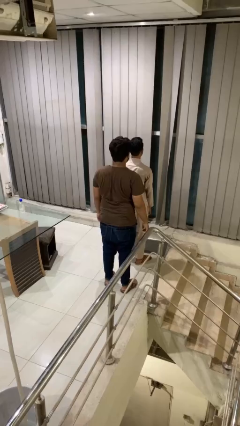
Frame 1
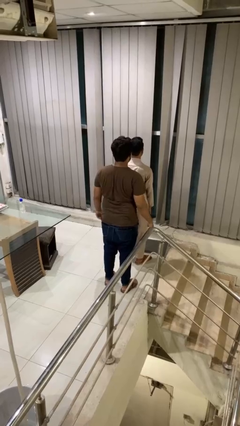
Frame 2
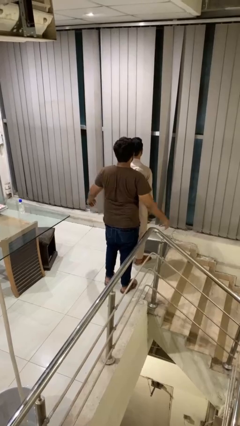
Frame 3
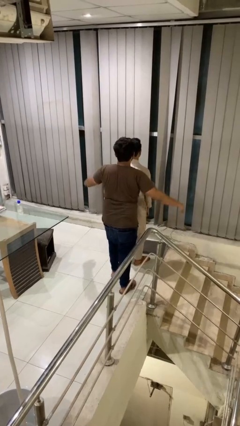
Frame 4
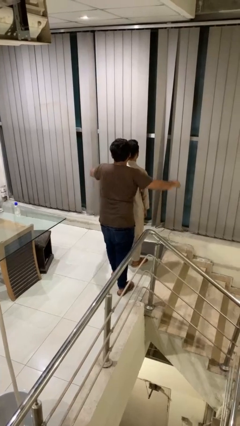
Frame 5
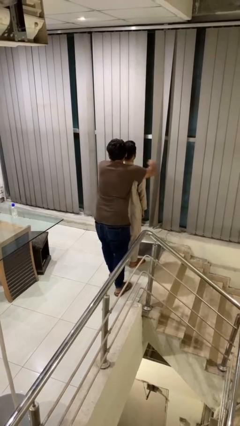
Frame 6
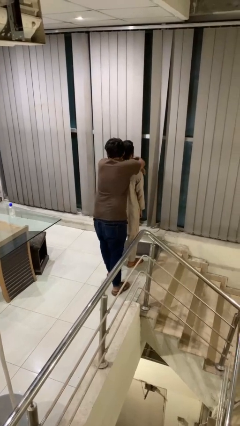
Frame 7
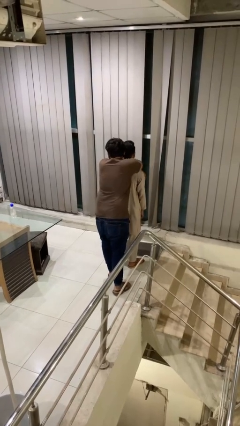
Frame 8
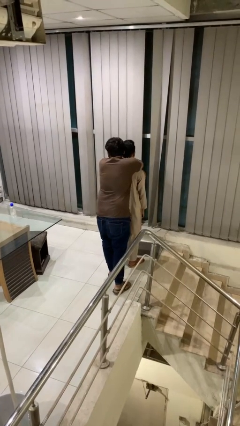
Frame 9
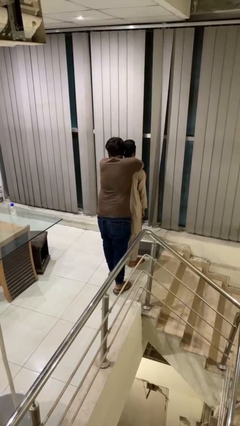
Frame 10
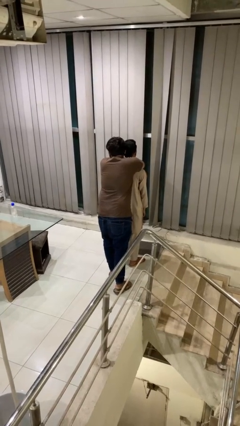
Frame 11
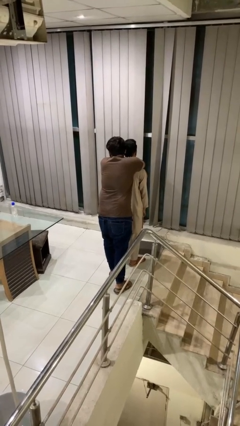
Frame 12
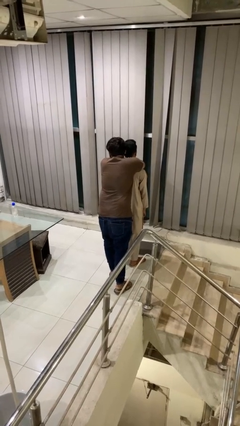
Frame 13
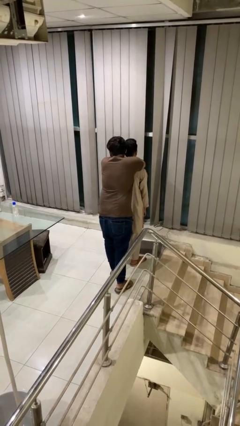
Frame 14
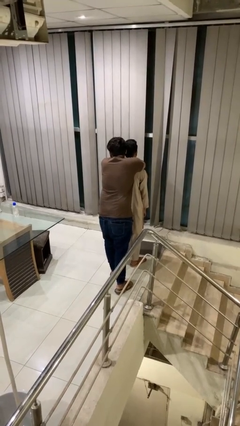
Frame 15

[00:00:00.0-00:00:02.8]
person hugs person from behind

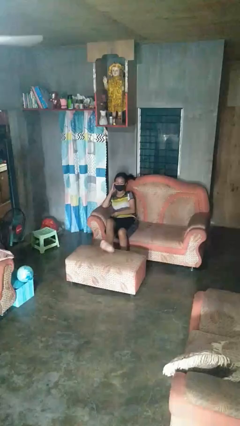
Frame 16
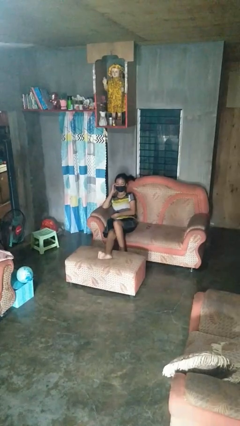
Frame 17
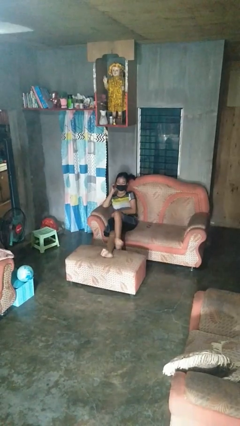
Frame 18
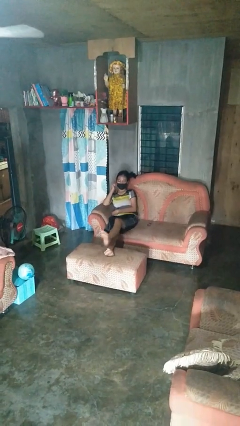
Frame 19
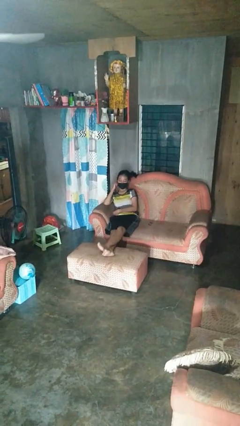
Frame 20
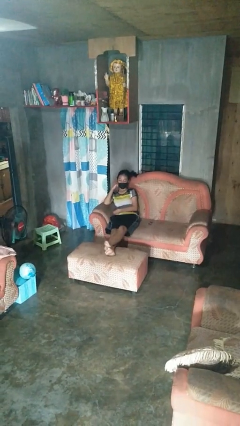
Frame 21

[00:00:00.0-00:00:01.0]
person puts feet up

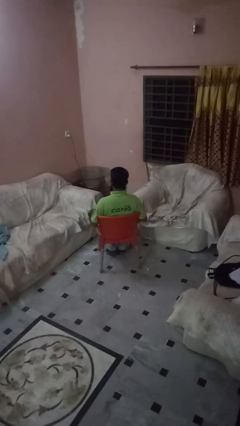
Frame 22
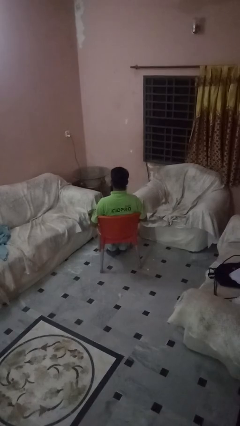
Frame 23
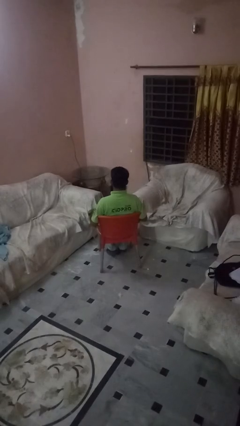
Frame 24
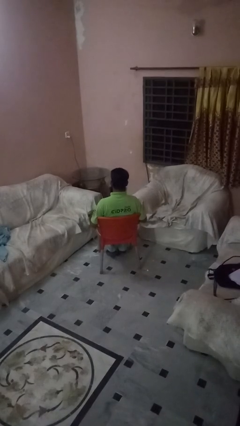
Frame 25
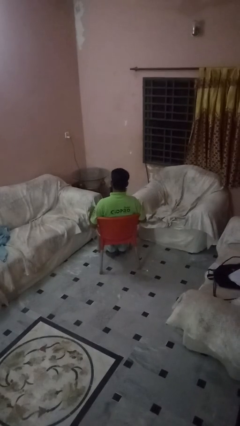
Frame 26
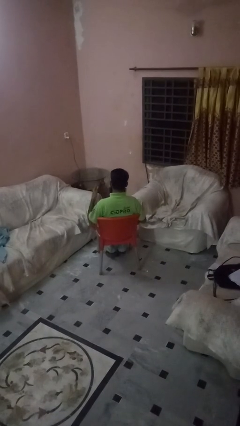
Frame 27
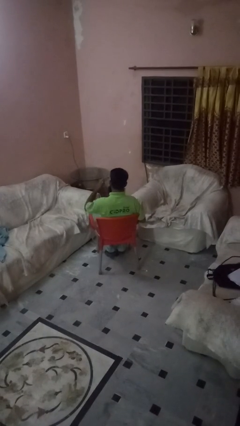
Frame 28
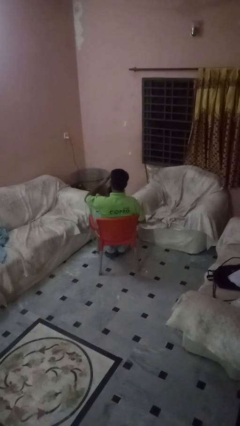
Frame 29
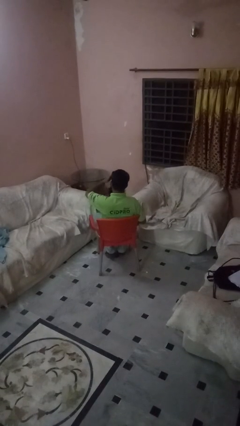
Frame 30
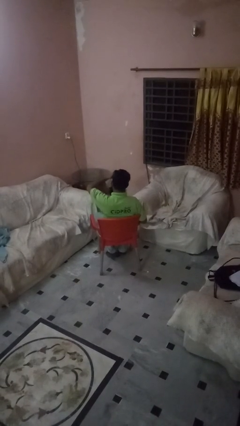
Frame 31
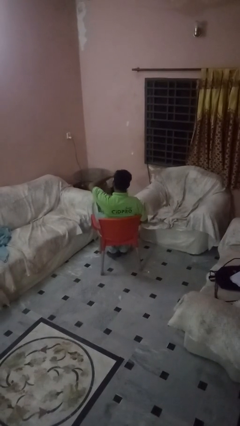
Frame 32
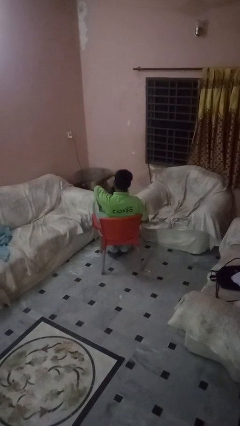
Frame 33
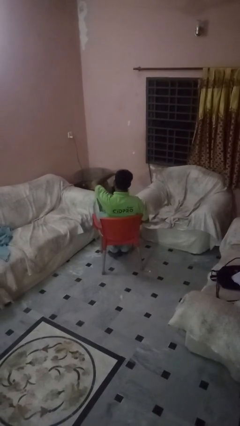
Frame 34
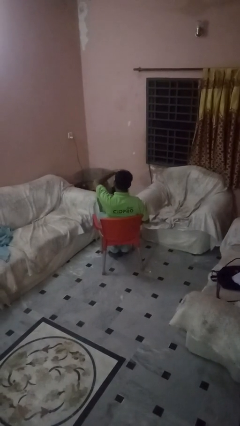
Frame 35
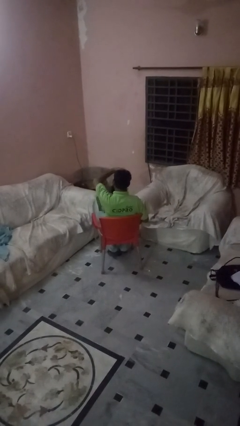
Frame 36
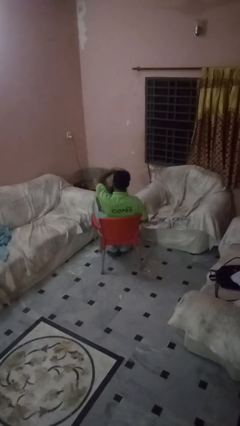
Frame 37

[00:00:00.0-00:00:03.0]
person strokes hair

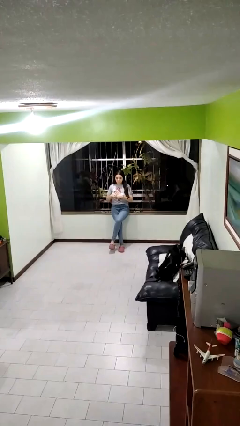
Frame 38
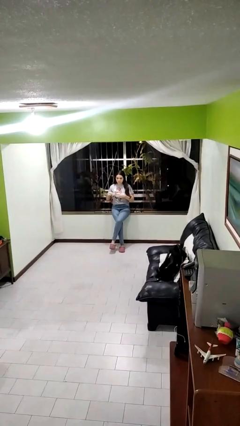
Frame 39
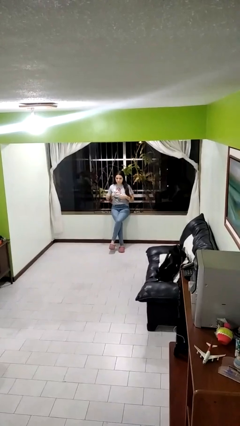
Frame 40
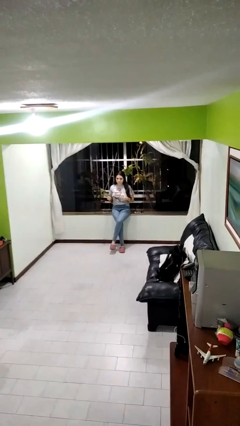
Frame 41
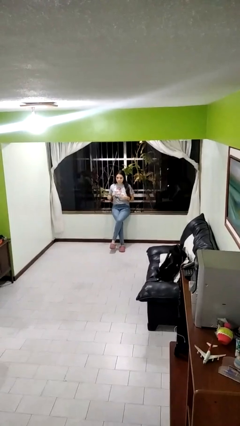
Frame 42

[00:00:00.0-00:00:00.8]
person takes off ring

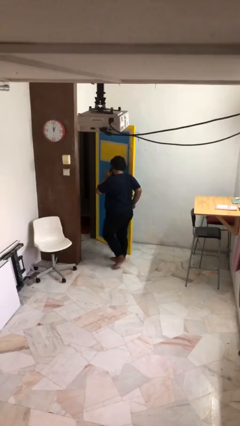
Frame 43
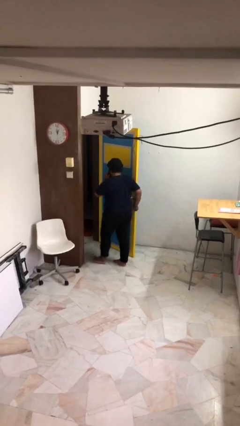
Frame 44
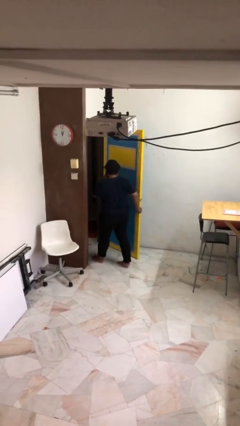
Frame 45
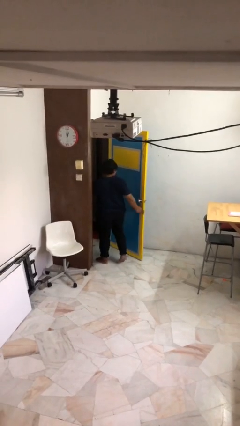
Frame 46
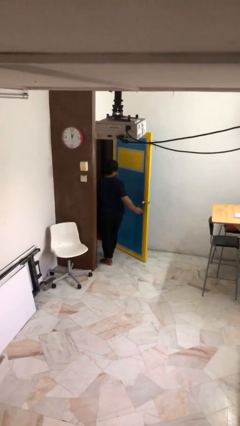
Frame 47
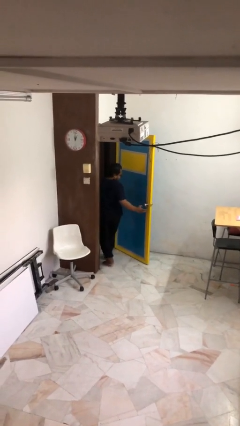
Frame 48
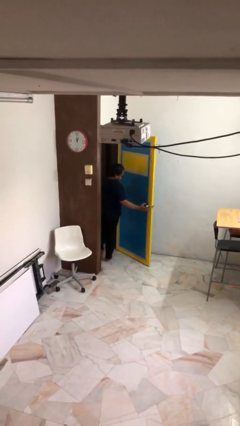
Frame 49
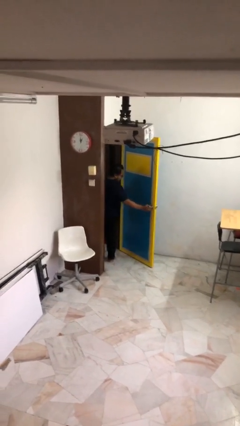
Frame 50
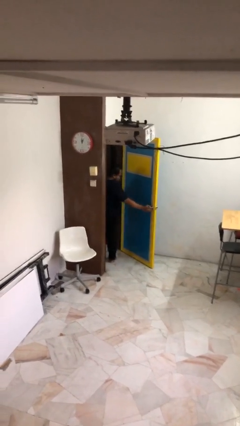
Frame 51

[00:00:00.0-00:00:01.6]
person exits scene through structure

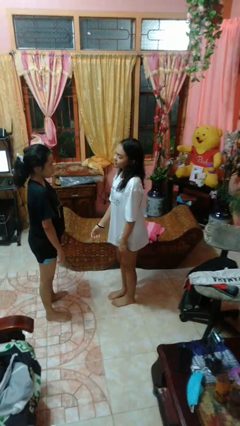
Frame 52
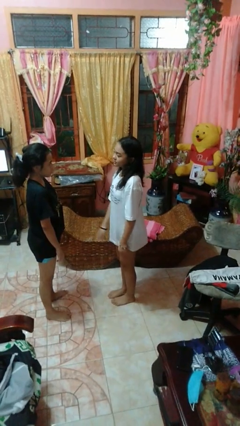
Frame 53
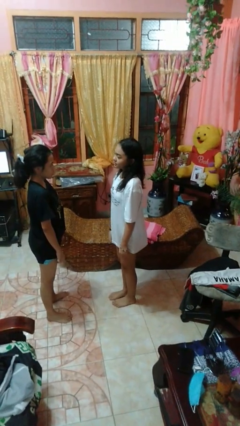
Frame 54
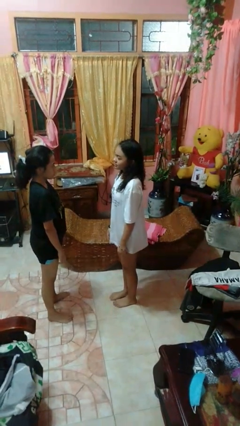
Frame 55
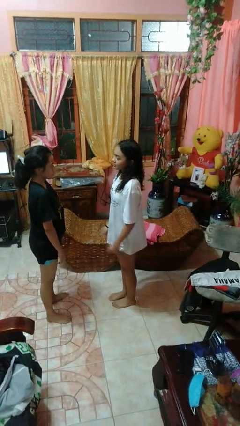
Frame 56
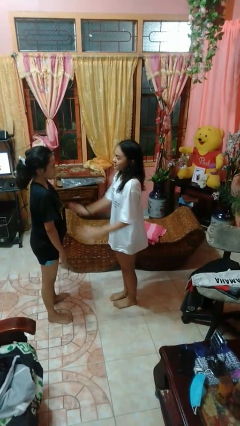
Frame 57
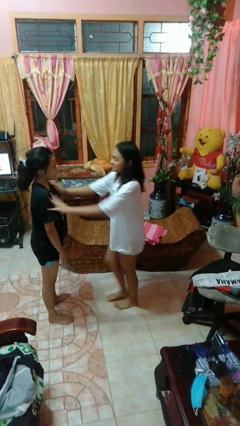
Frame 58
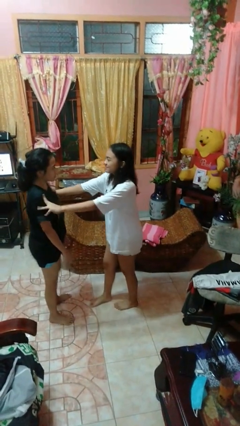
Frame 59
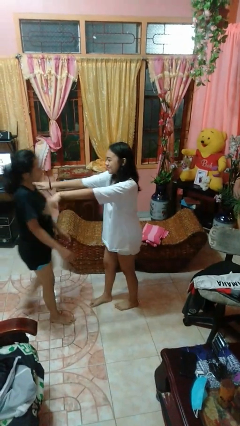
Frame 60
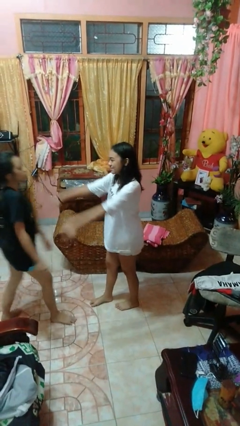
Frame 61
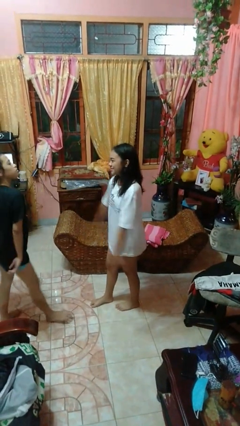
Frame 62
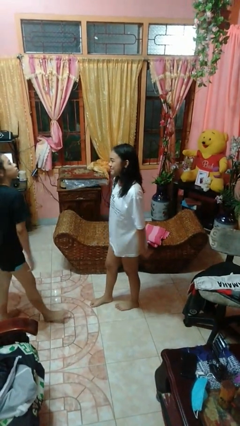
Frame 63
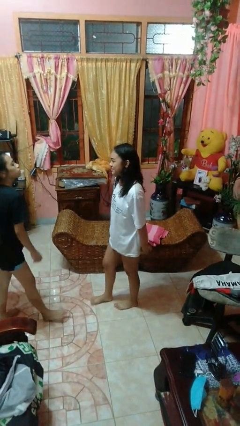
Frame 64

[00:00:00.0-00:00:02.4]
person shoves person

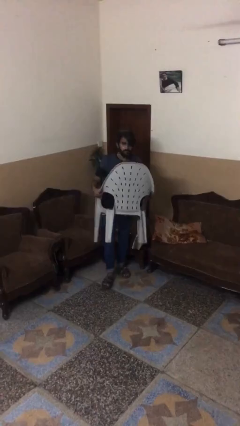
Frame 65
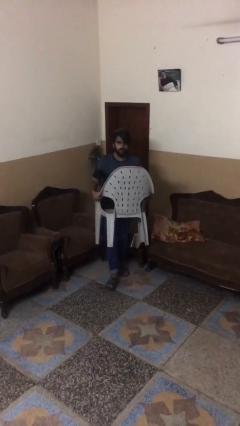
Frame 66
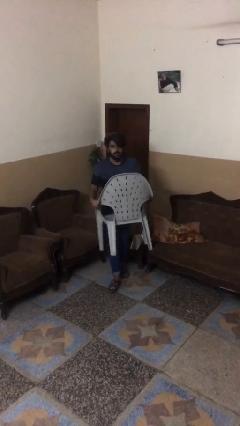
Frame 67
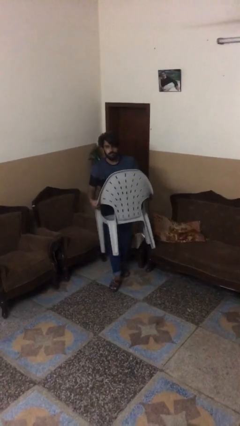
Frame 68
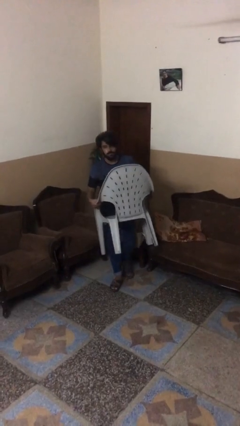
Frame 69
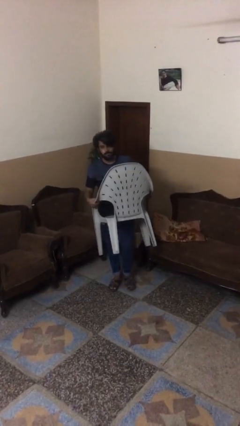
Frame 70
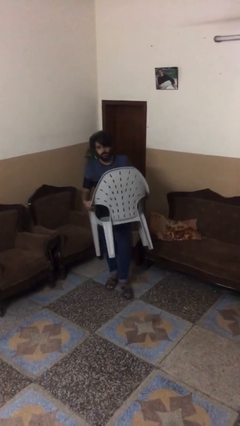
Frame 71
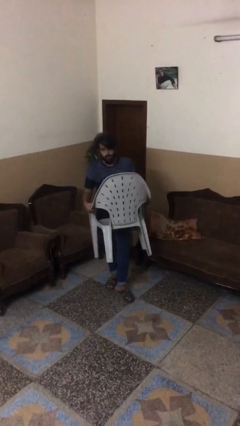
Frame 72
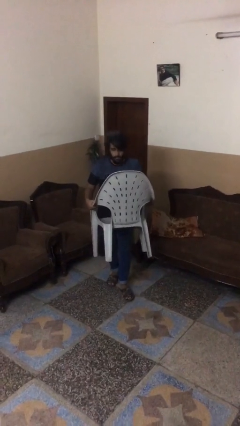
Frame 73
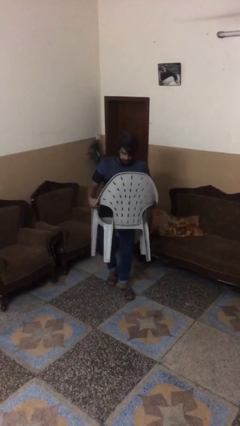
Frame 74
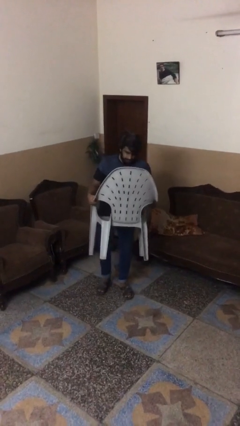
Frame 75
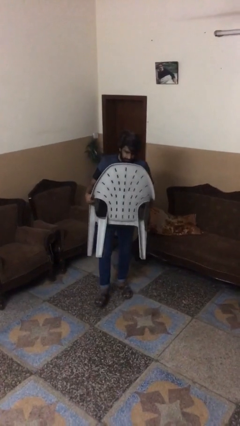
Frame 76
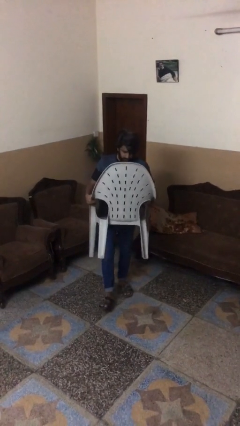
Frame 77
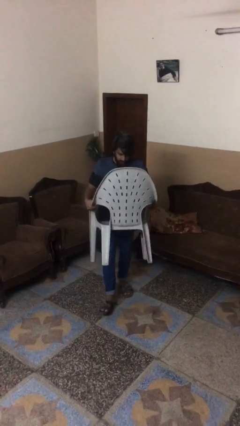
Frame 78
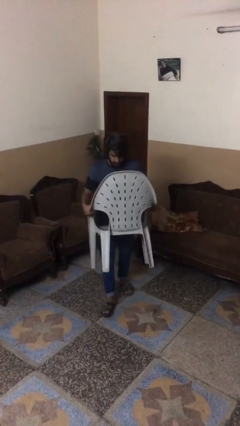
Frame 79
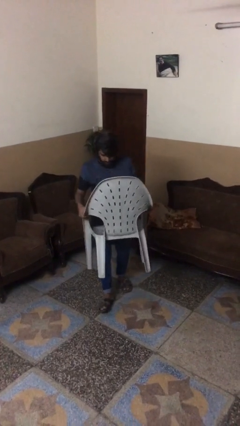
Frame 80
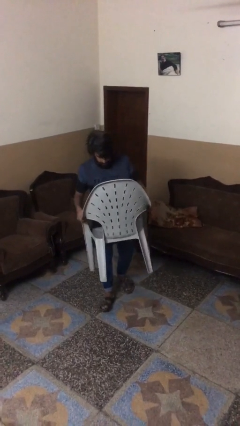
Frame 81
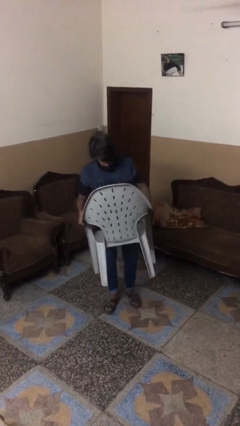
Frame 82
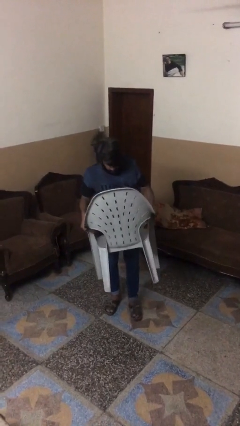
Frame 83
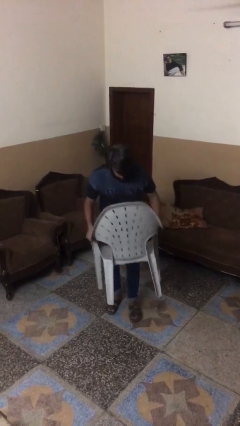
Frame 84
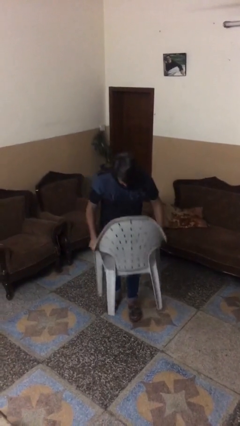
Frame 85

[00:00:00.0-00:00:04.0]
person carries heavy object

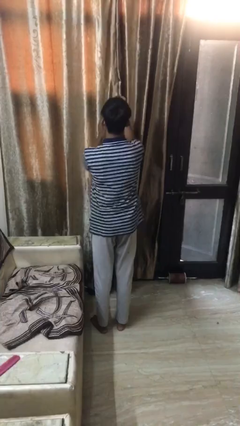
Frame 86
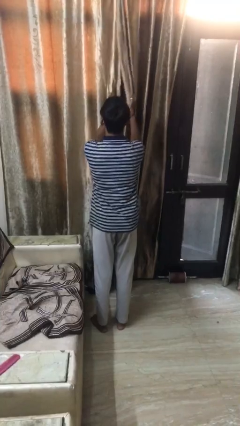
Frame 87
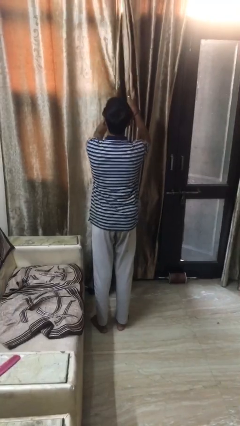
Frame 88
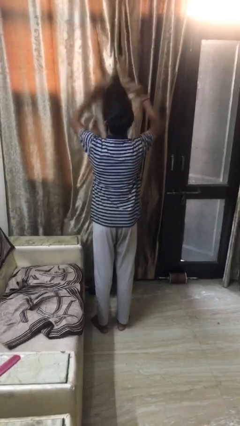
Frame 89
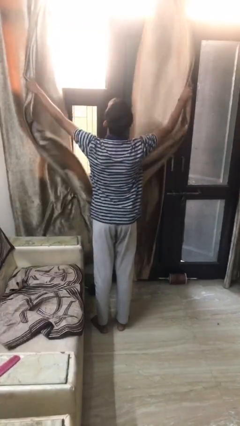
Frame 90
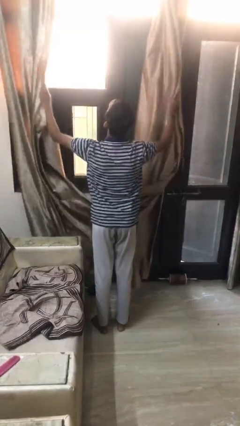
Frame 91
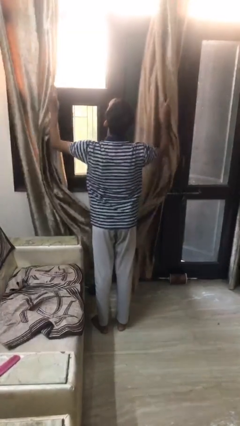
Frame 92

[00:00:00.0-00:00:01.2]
person opens curtains
